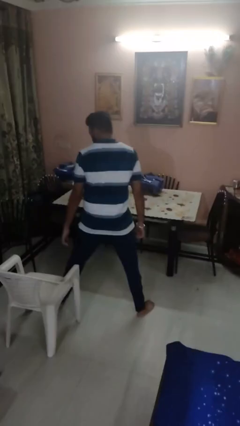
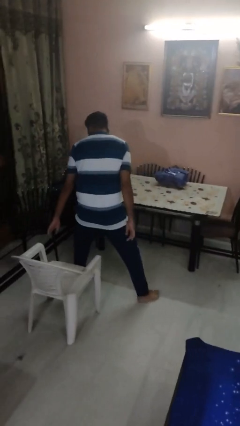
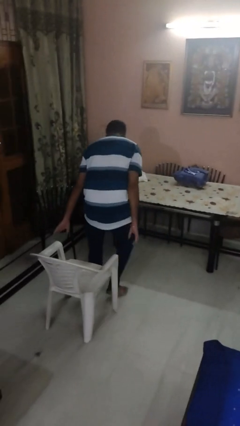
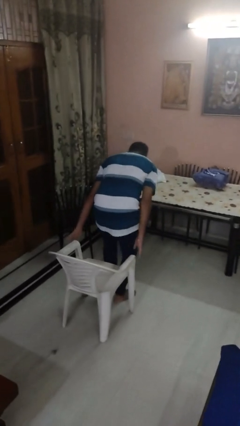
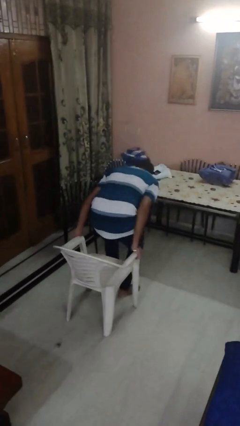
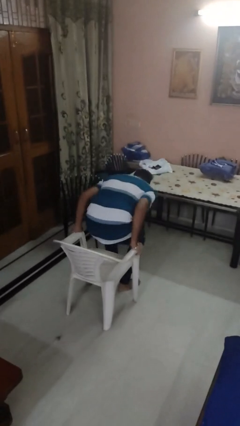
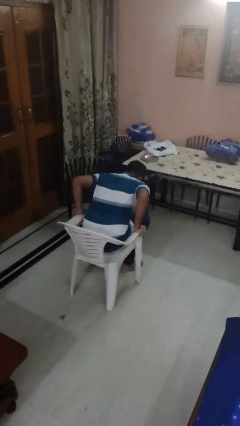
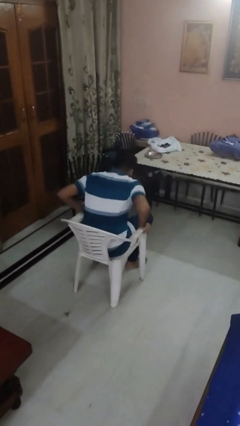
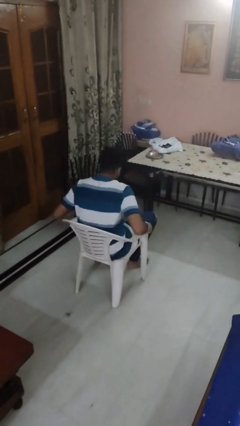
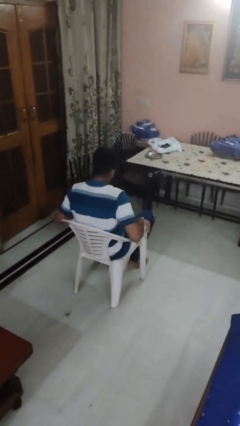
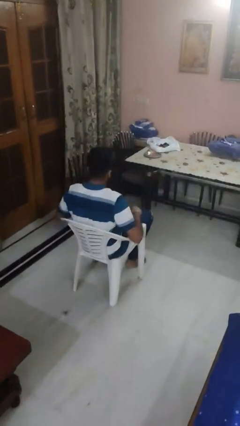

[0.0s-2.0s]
person sits down

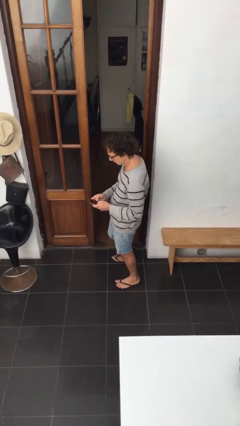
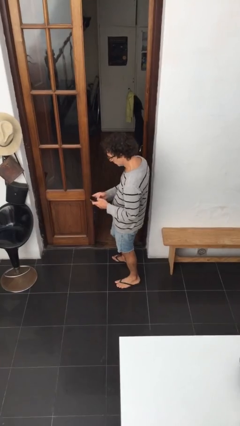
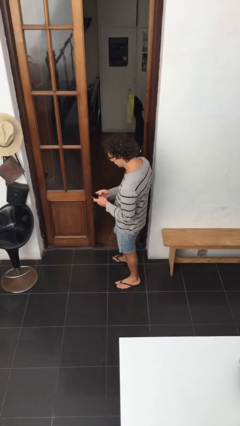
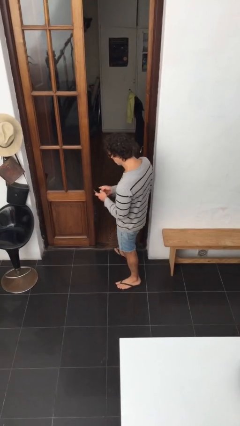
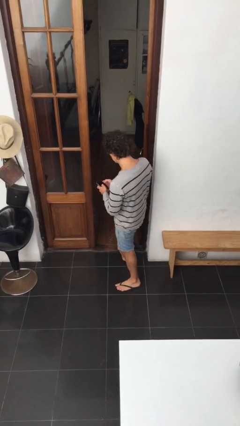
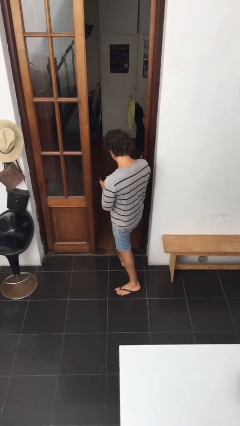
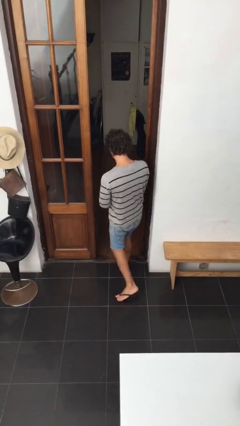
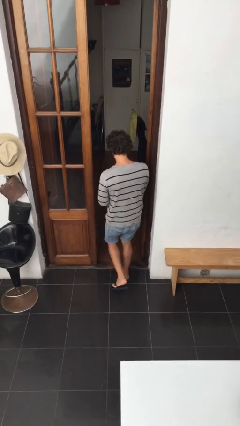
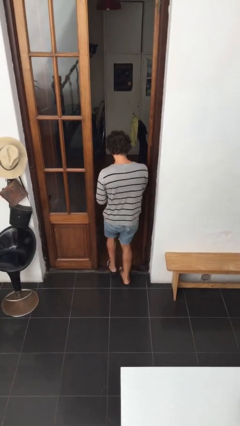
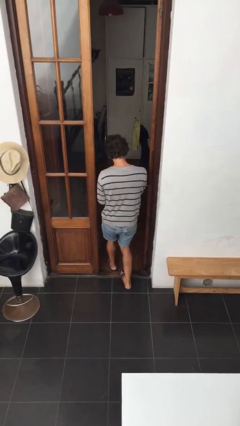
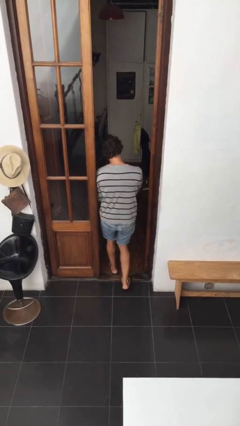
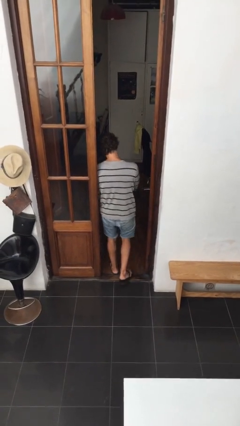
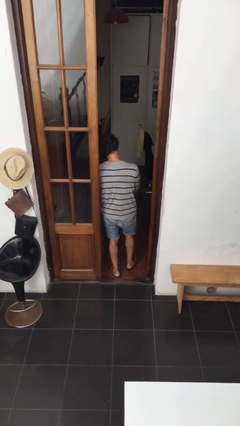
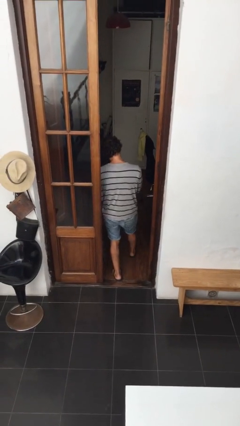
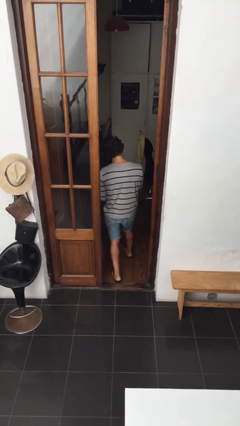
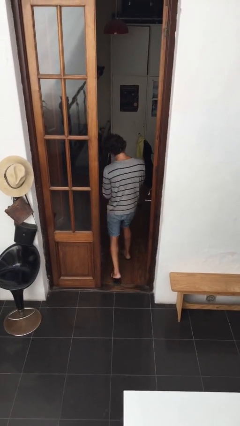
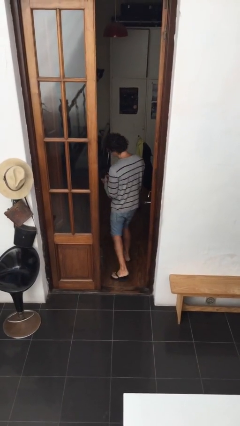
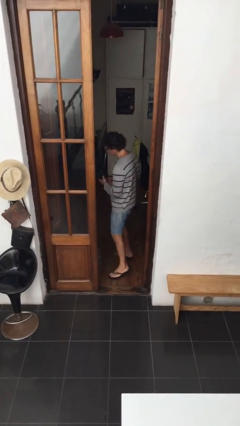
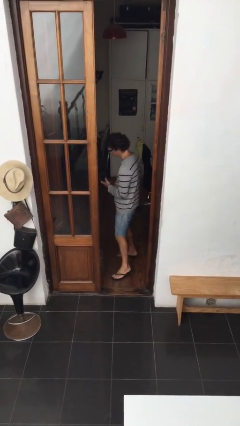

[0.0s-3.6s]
person exits scene through structure

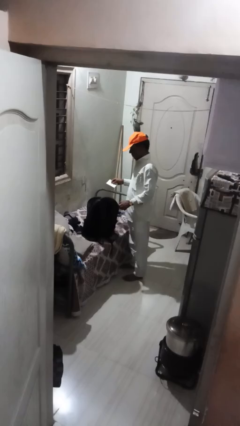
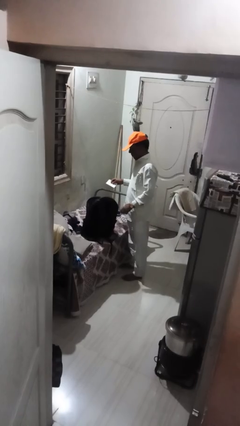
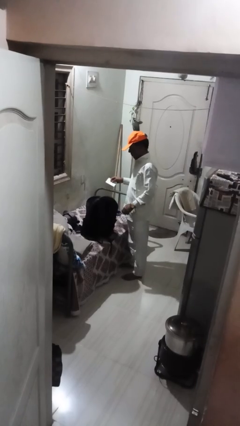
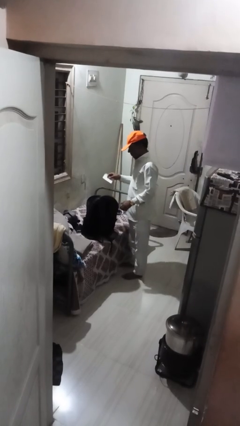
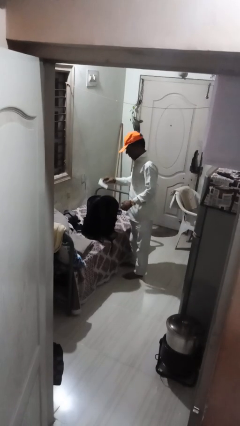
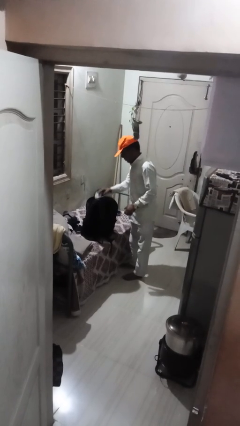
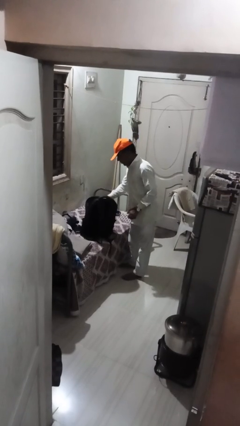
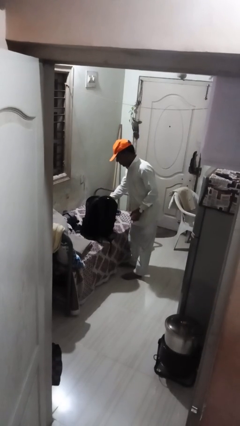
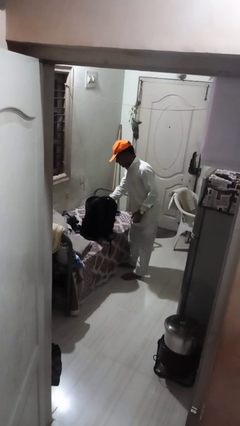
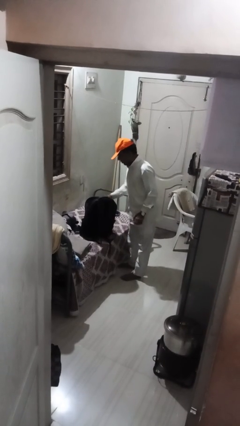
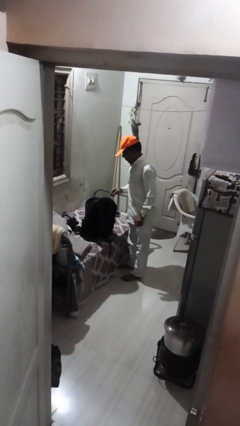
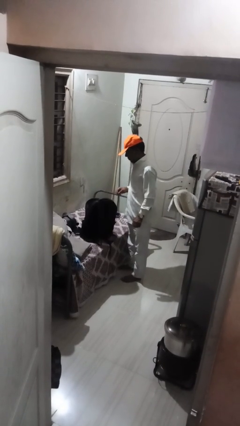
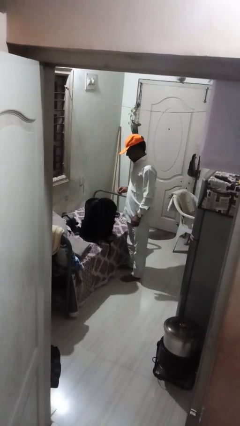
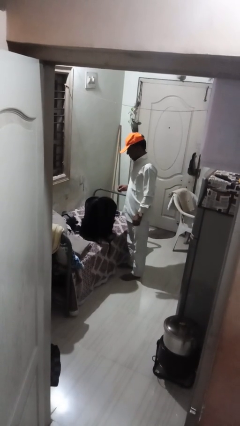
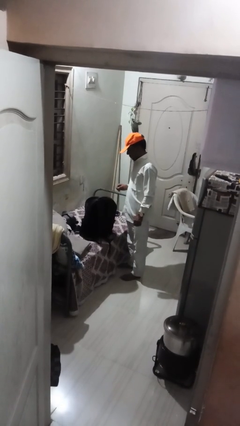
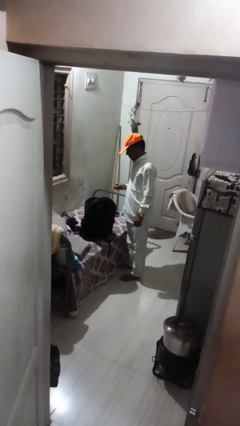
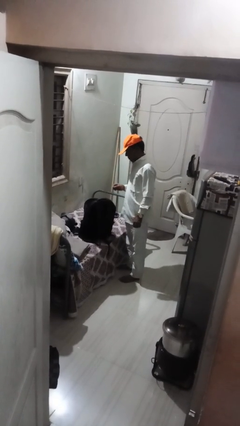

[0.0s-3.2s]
person puts object into backpack

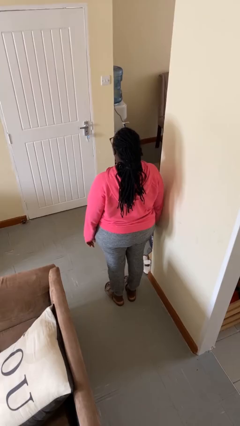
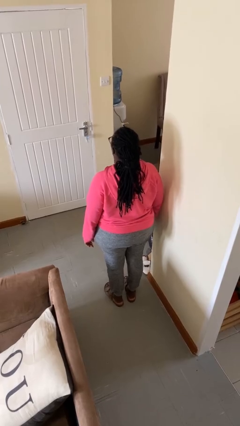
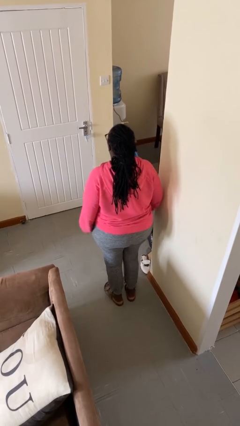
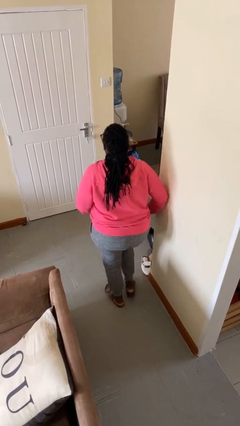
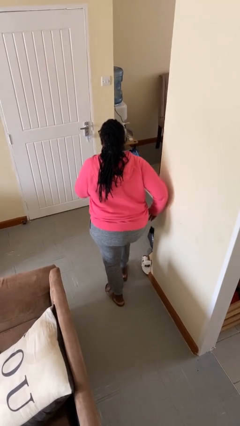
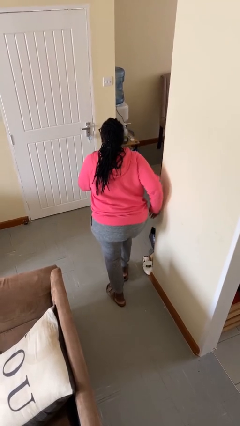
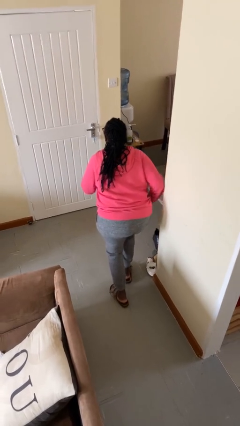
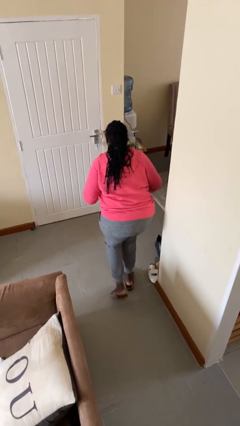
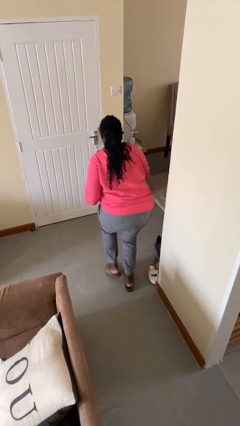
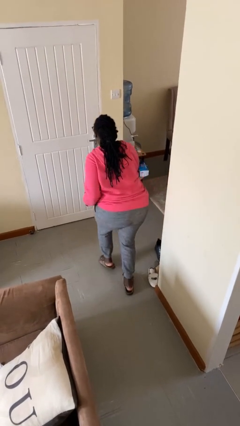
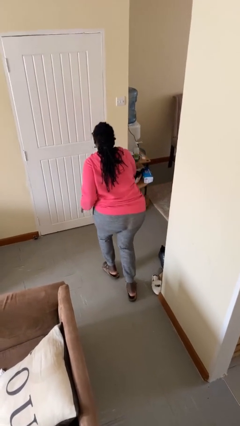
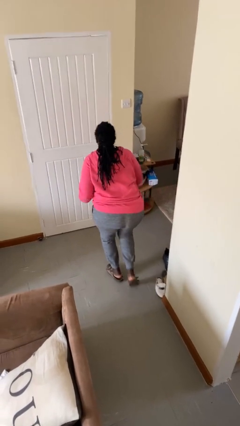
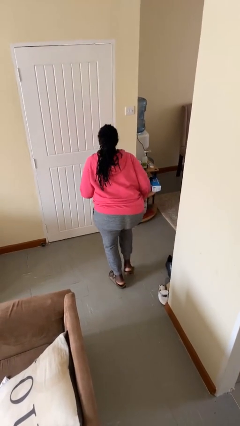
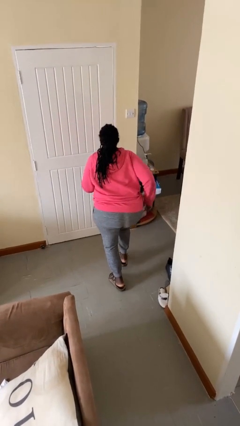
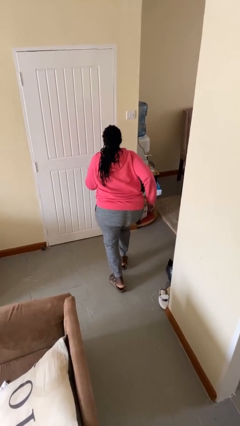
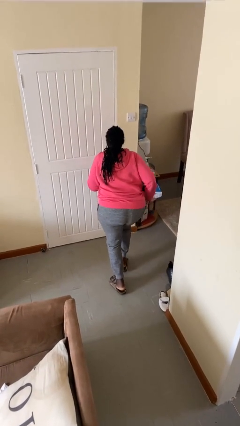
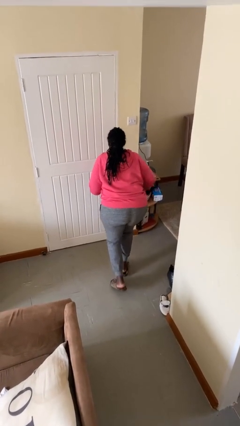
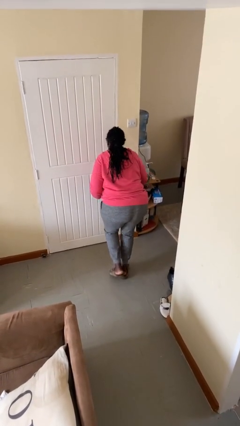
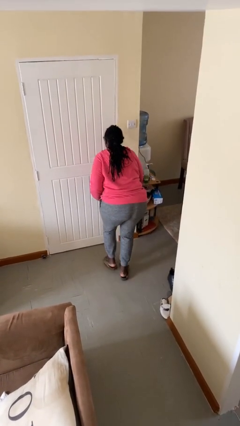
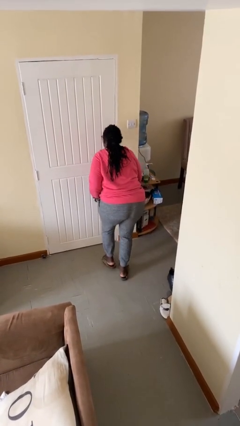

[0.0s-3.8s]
person walks tiptoe

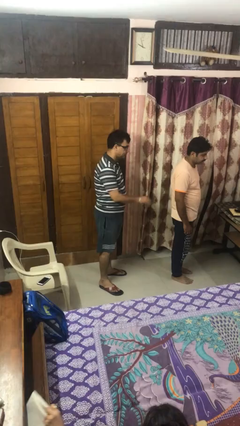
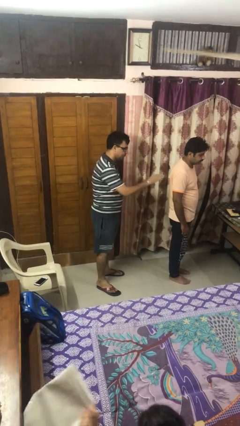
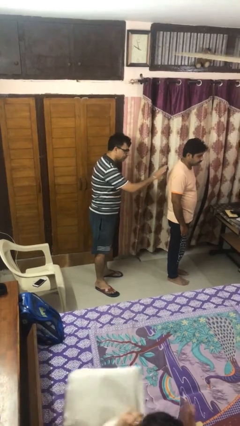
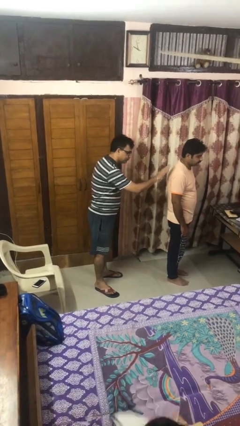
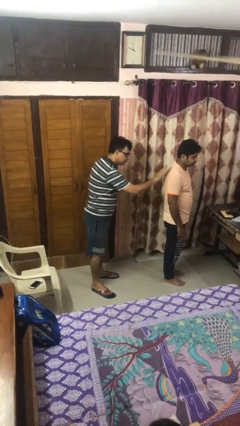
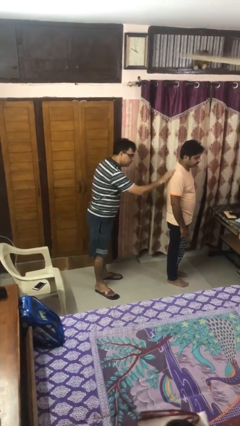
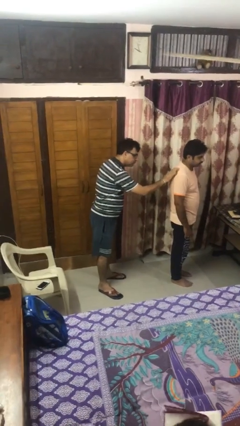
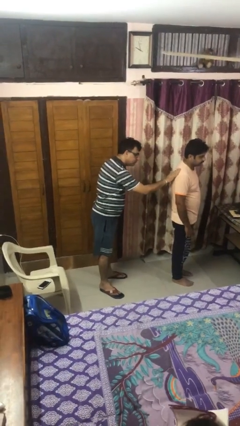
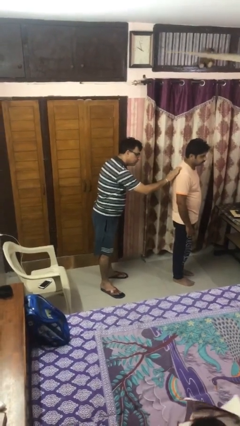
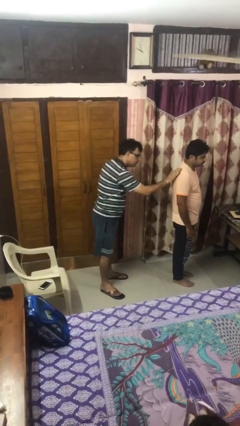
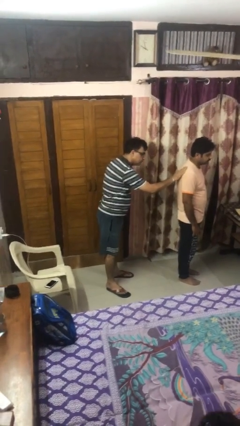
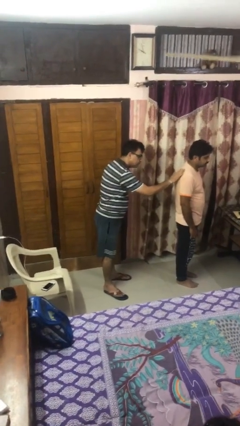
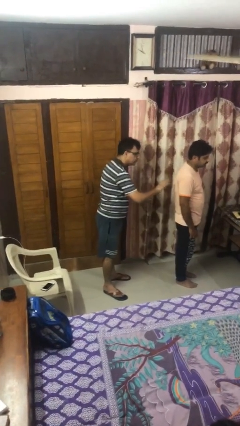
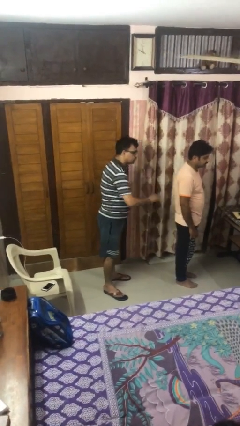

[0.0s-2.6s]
person touches back of person

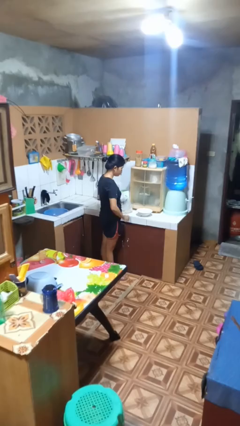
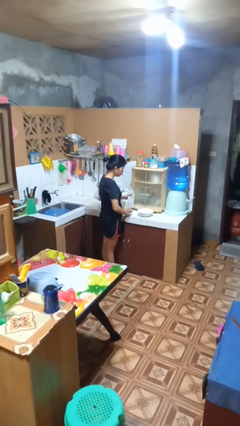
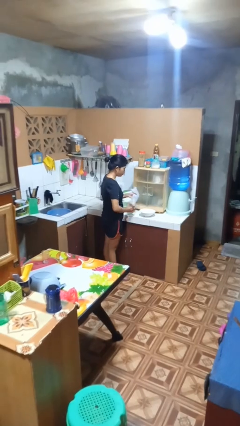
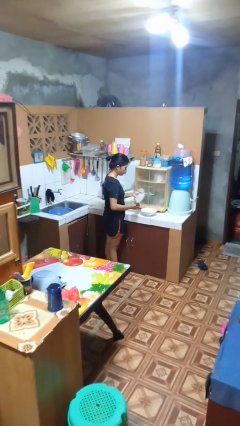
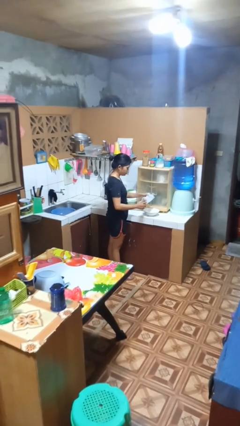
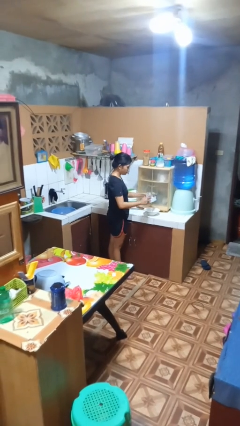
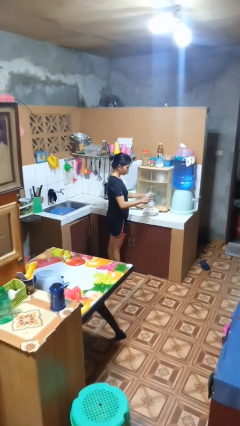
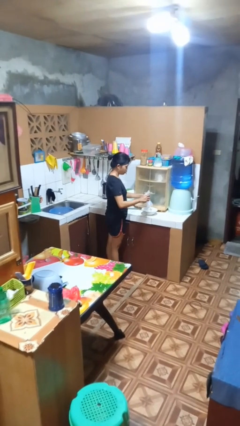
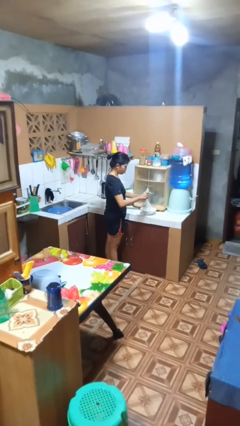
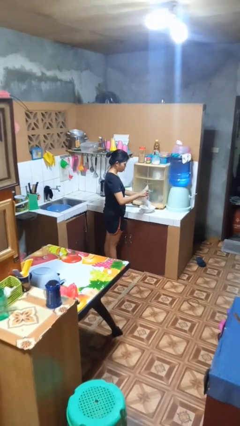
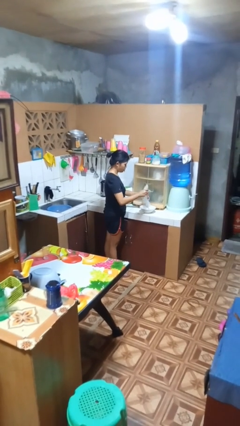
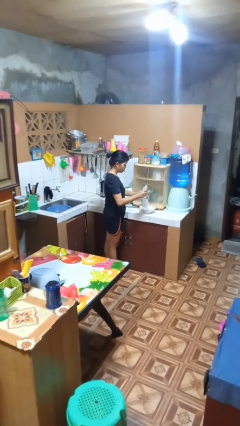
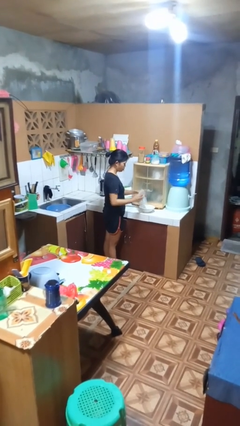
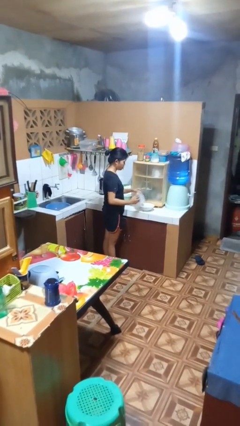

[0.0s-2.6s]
person pours into bowl
